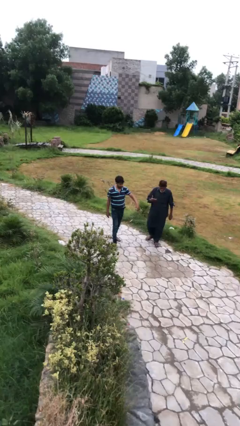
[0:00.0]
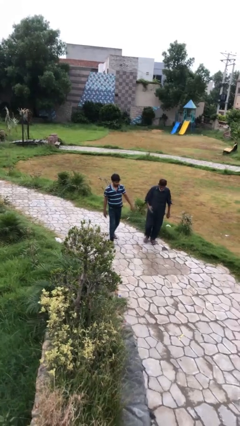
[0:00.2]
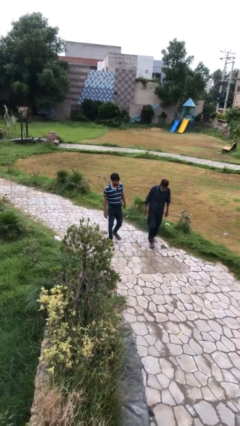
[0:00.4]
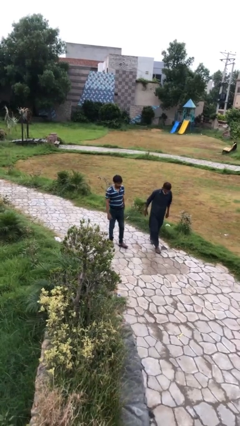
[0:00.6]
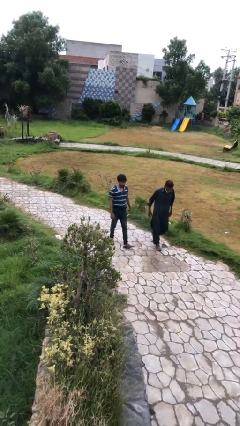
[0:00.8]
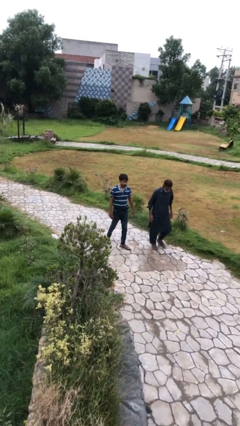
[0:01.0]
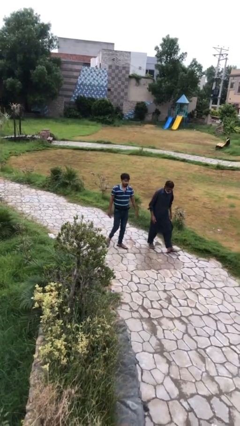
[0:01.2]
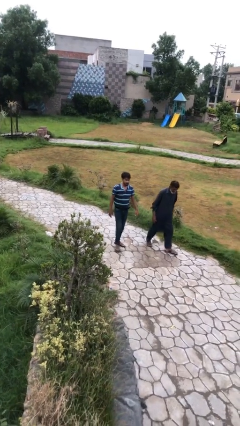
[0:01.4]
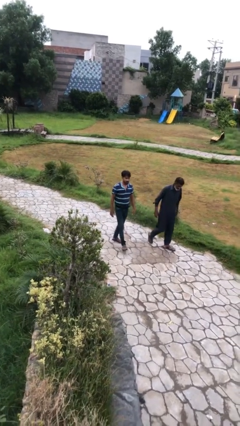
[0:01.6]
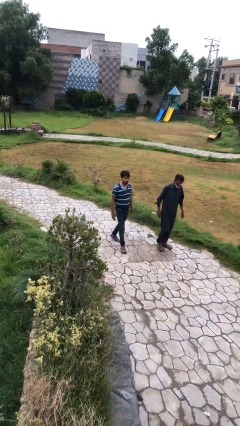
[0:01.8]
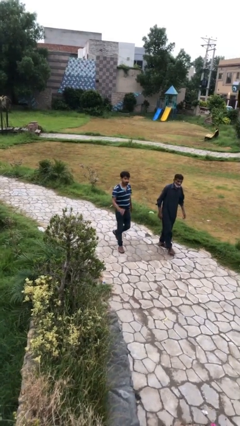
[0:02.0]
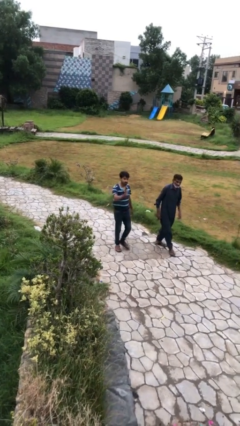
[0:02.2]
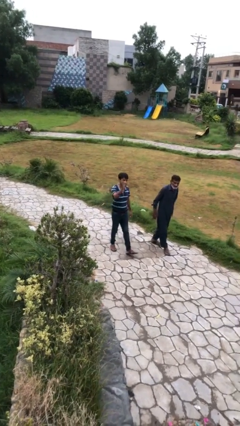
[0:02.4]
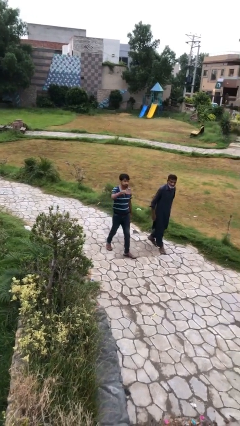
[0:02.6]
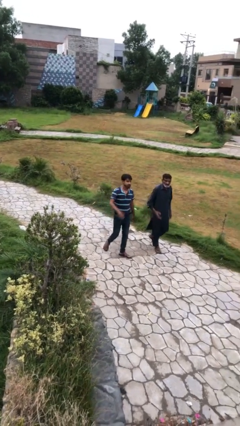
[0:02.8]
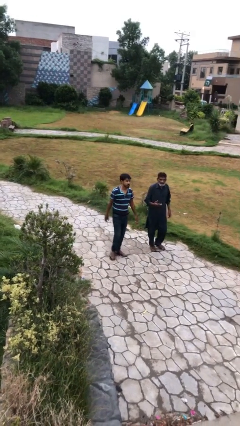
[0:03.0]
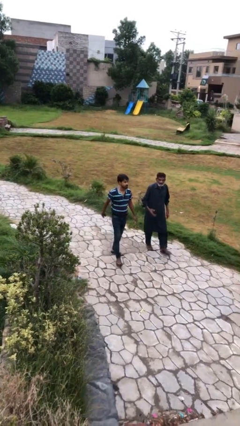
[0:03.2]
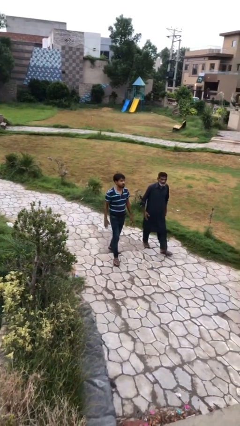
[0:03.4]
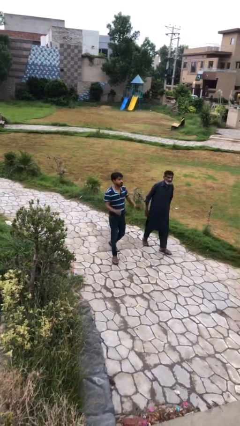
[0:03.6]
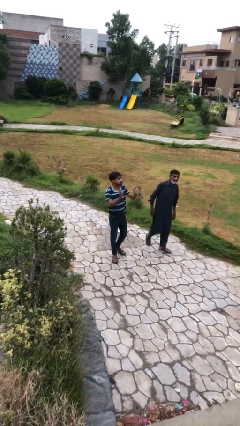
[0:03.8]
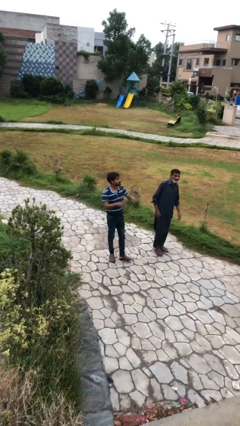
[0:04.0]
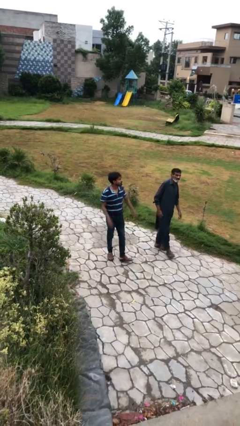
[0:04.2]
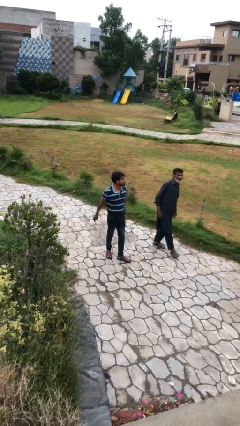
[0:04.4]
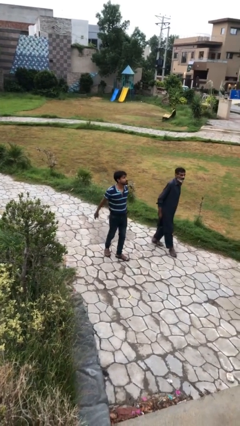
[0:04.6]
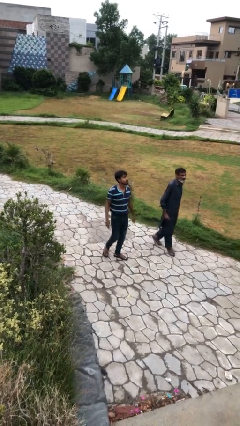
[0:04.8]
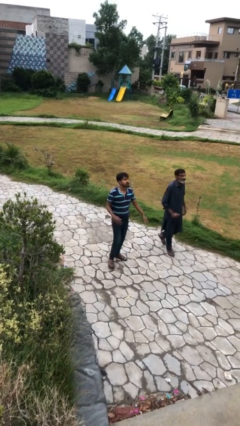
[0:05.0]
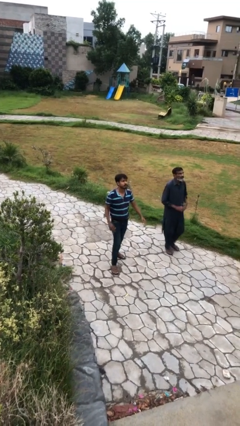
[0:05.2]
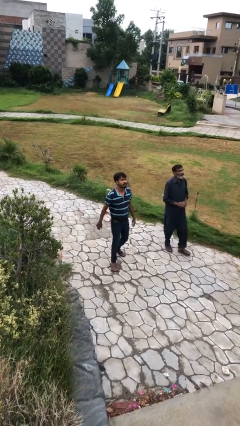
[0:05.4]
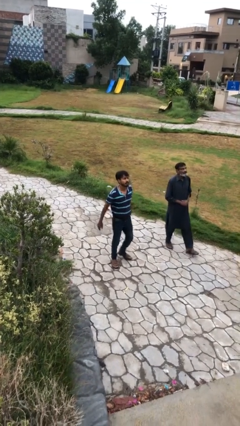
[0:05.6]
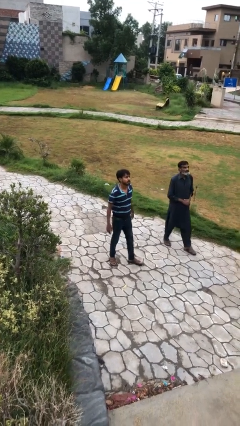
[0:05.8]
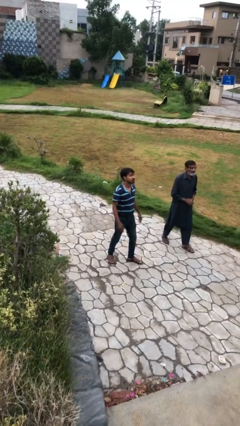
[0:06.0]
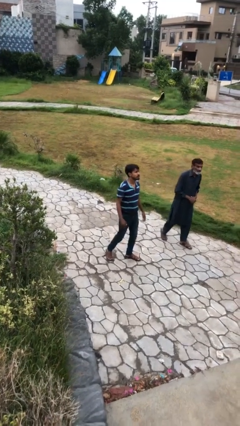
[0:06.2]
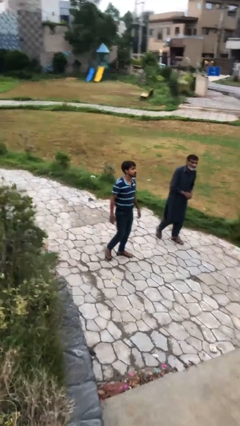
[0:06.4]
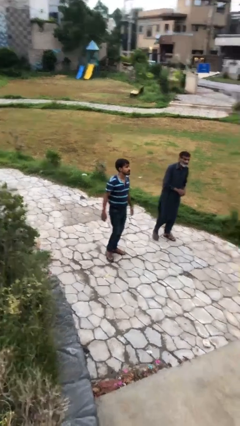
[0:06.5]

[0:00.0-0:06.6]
person talks to person

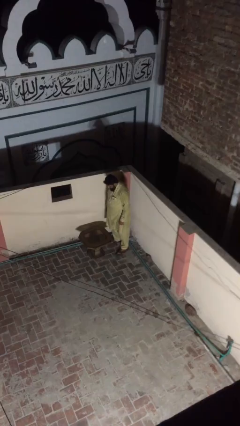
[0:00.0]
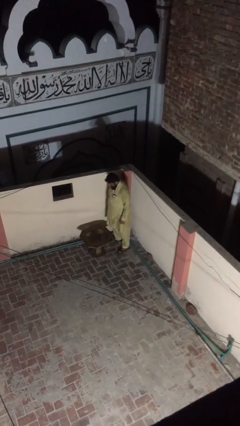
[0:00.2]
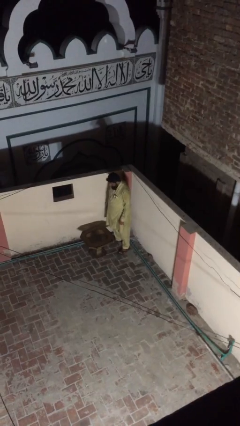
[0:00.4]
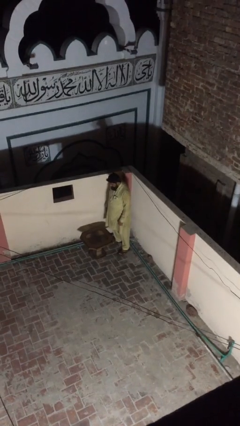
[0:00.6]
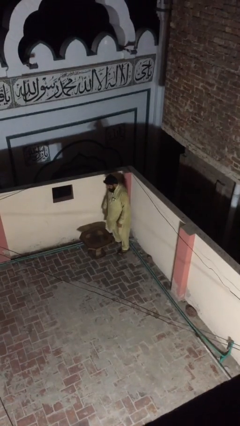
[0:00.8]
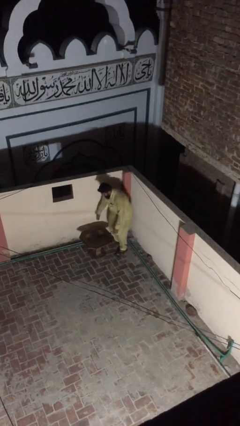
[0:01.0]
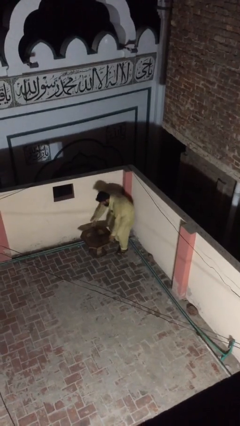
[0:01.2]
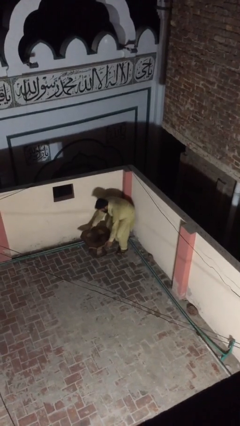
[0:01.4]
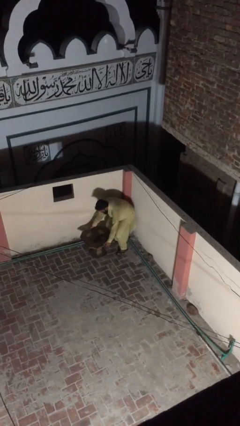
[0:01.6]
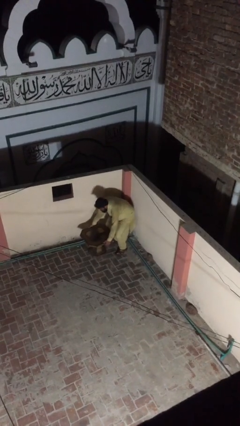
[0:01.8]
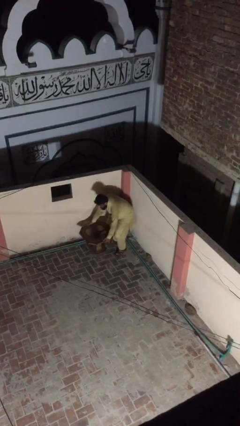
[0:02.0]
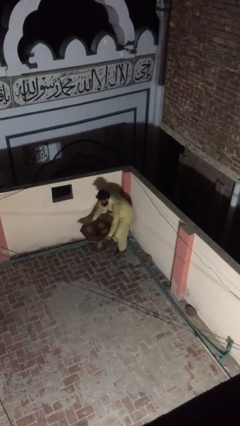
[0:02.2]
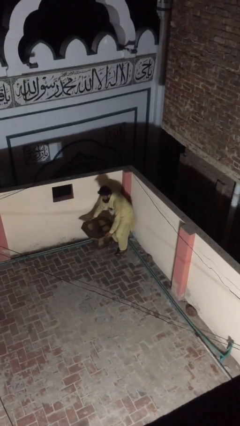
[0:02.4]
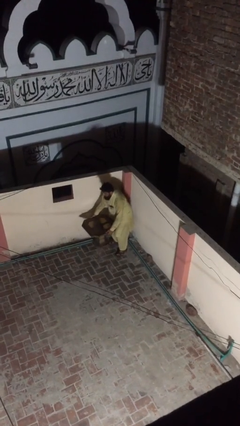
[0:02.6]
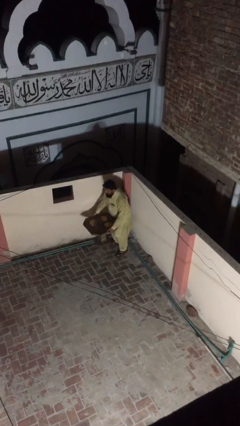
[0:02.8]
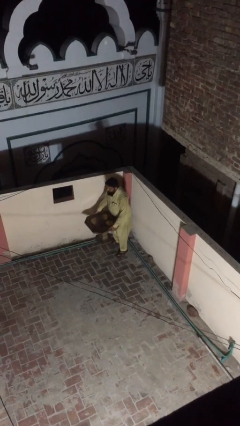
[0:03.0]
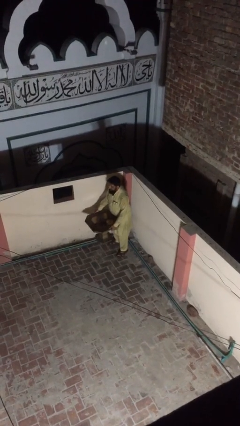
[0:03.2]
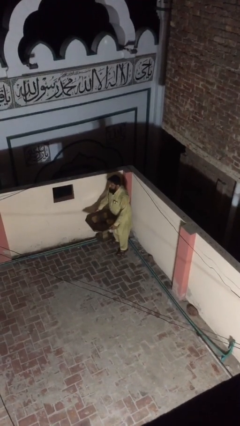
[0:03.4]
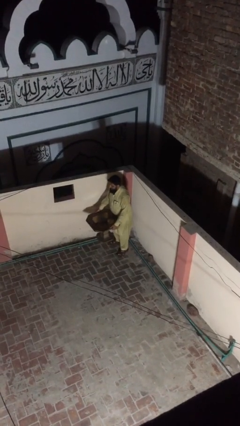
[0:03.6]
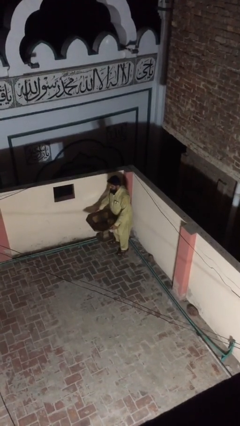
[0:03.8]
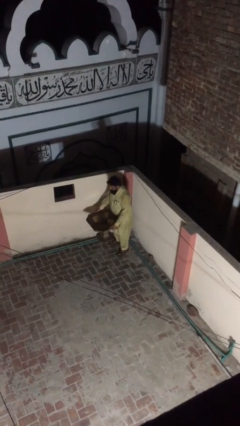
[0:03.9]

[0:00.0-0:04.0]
person picks up object from floor

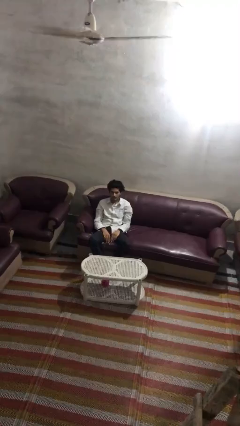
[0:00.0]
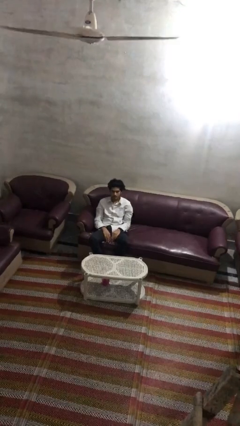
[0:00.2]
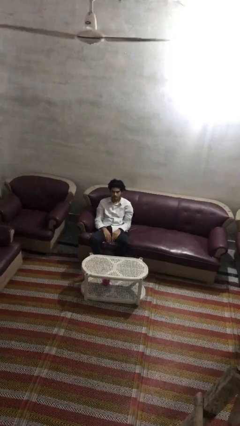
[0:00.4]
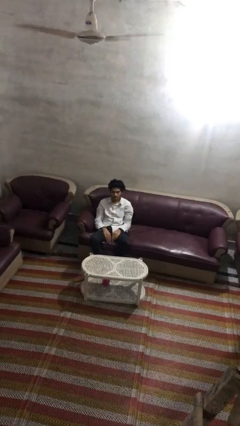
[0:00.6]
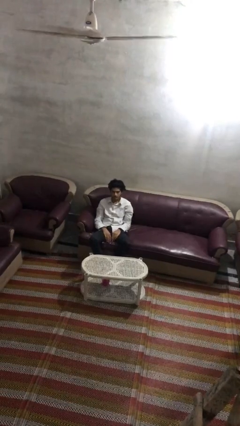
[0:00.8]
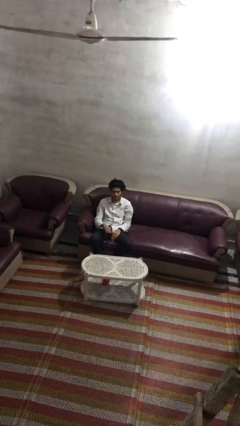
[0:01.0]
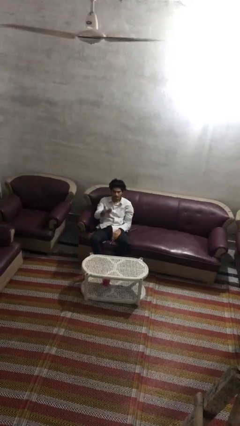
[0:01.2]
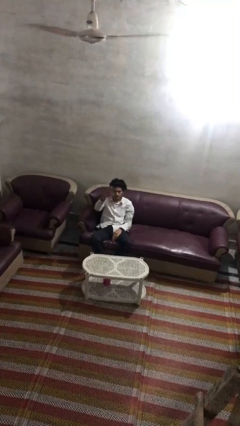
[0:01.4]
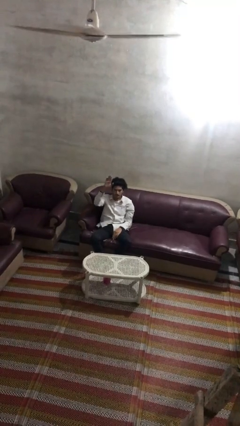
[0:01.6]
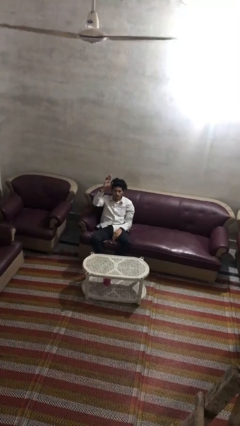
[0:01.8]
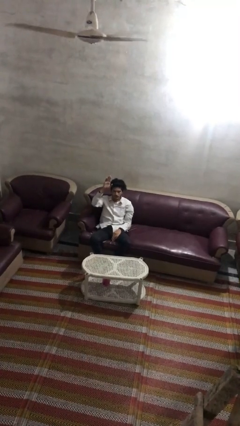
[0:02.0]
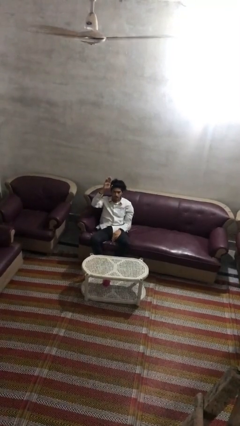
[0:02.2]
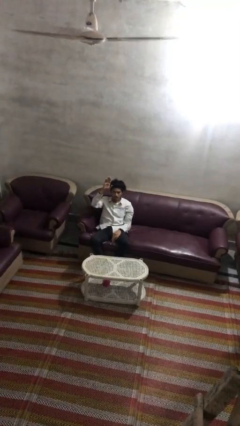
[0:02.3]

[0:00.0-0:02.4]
person gestures raise hand

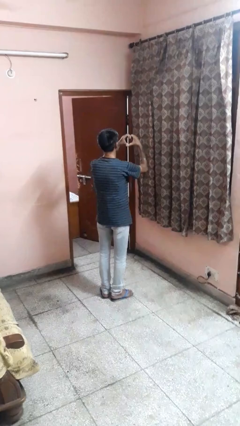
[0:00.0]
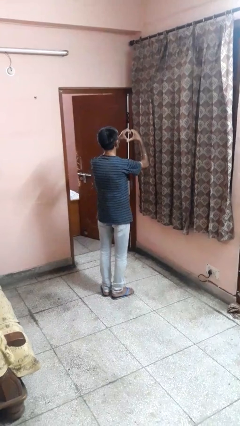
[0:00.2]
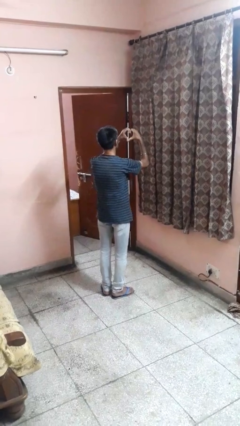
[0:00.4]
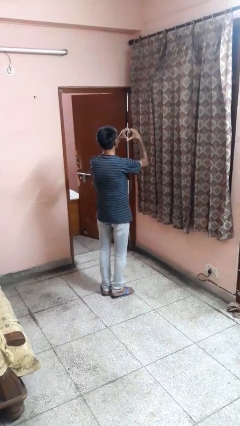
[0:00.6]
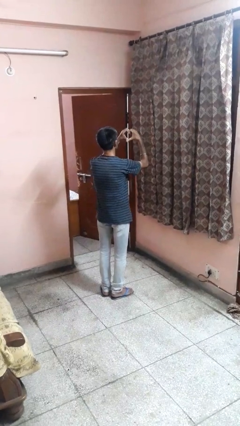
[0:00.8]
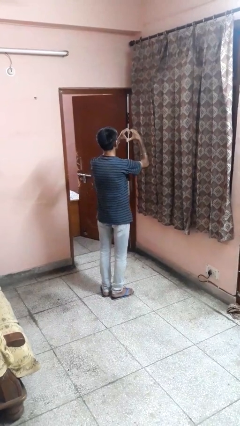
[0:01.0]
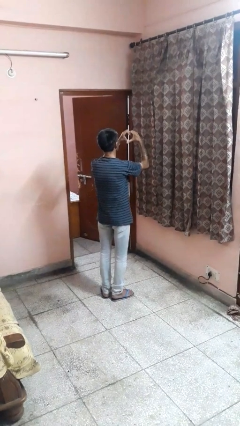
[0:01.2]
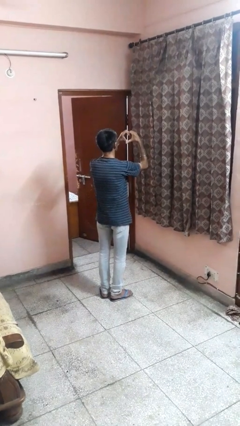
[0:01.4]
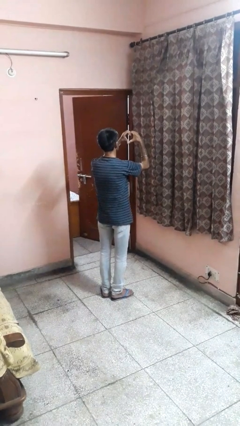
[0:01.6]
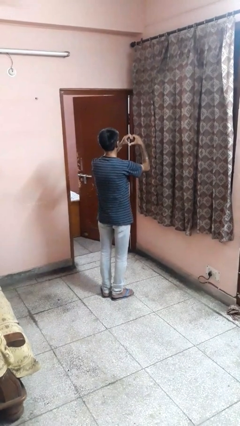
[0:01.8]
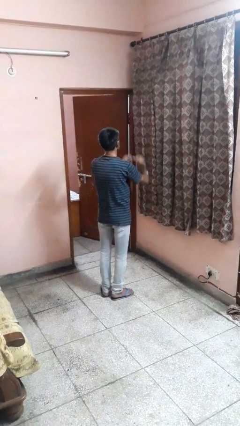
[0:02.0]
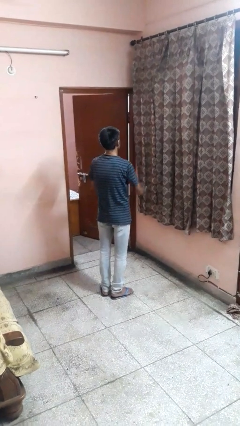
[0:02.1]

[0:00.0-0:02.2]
person gestures heart

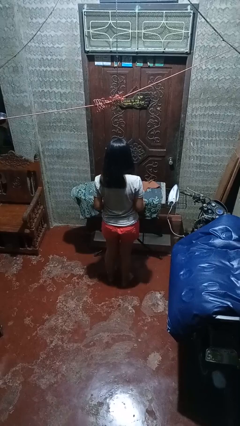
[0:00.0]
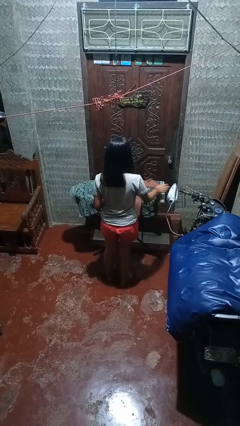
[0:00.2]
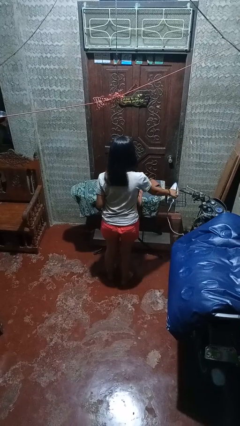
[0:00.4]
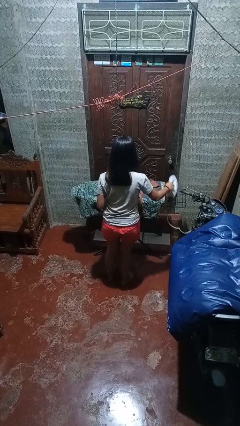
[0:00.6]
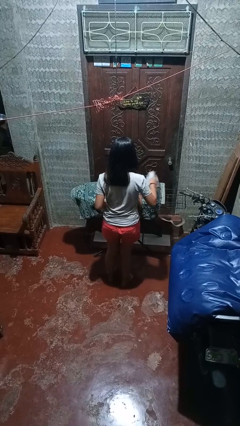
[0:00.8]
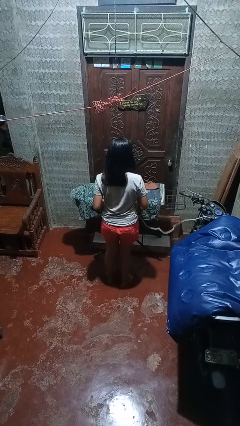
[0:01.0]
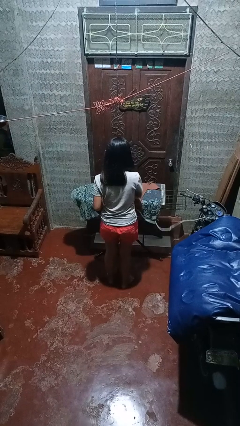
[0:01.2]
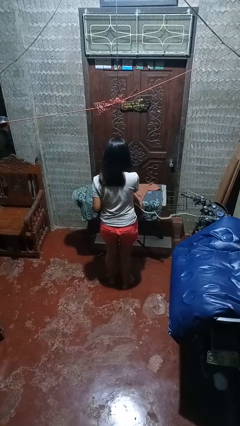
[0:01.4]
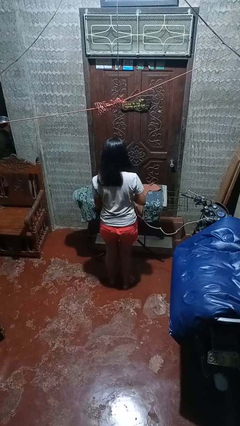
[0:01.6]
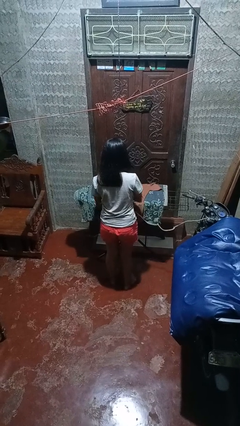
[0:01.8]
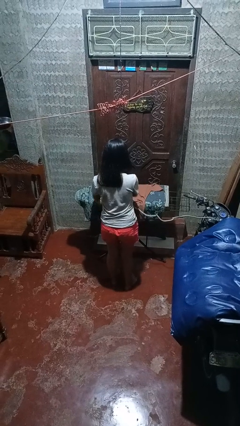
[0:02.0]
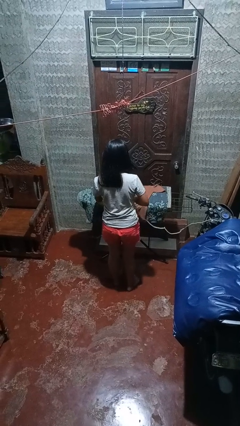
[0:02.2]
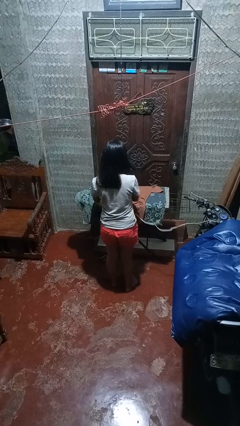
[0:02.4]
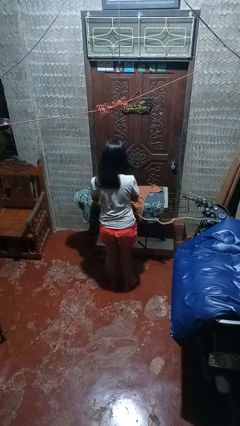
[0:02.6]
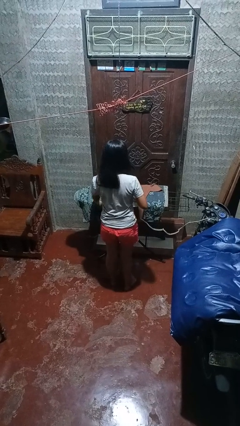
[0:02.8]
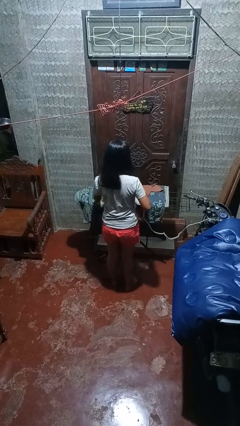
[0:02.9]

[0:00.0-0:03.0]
person irons clothes
